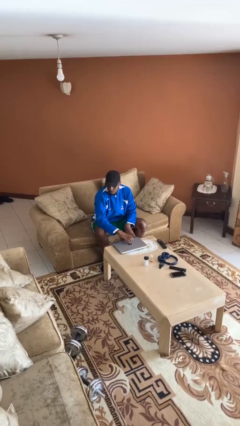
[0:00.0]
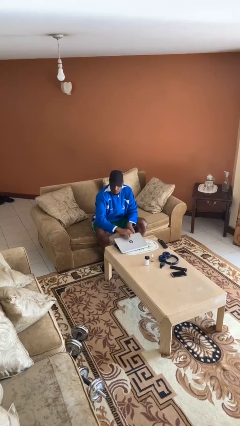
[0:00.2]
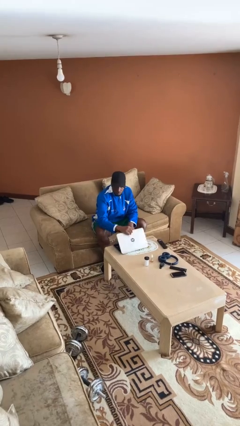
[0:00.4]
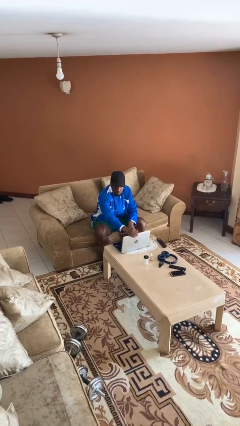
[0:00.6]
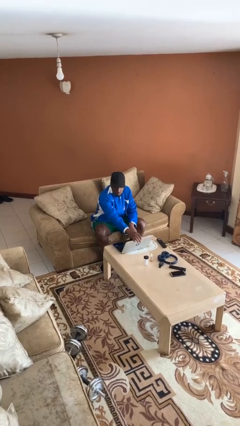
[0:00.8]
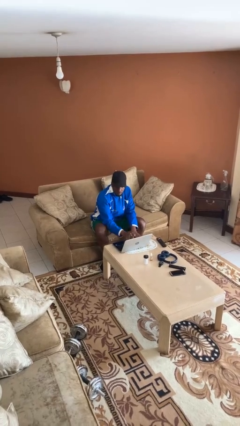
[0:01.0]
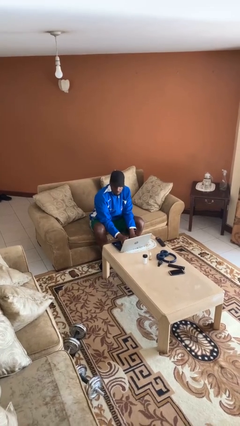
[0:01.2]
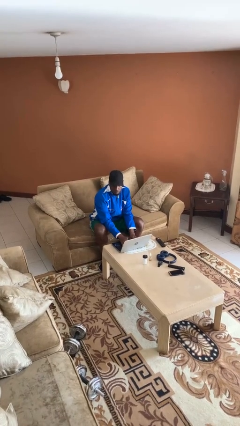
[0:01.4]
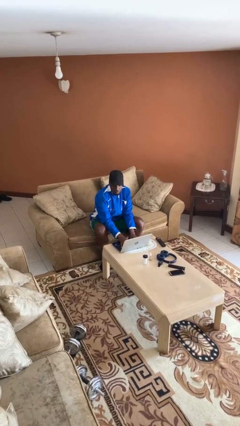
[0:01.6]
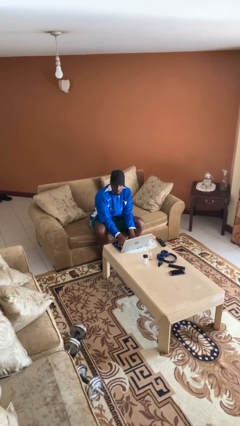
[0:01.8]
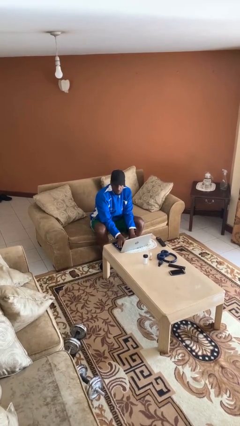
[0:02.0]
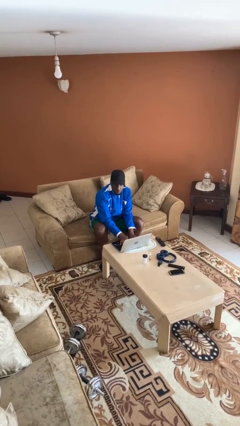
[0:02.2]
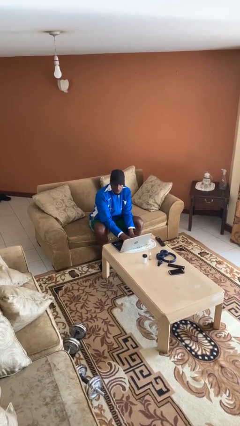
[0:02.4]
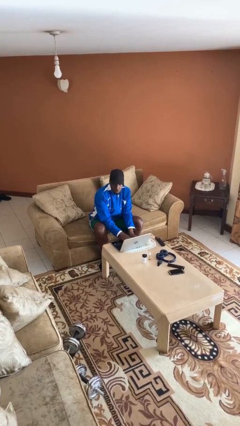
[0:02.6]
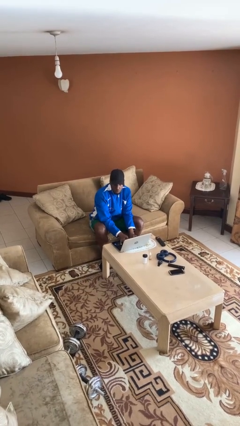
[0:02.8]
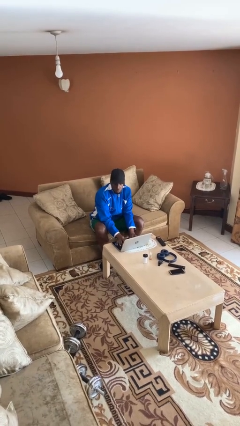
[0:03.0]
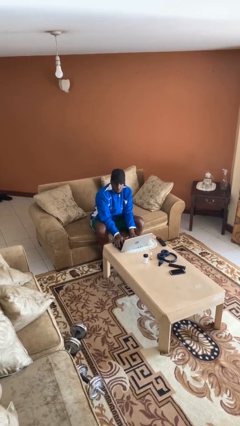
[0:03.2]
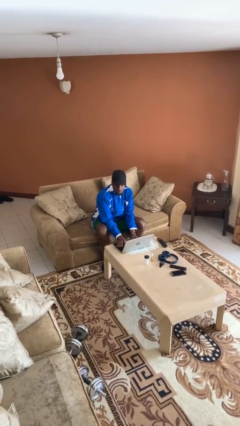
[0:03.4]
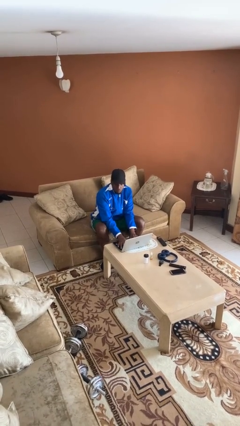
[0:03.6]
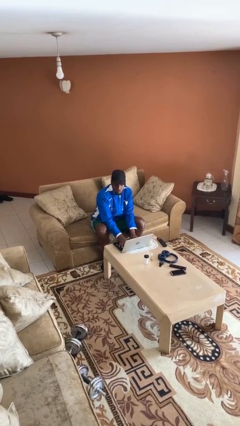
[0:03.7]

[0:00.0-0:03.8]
person interacts with laptop

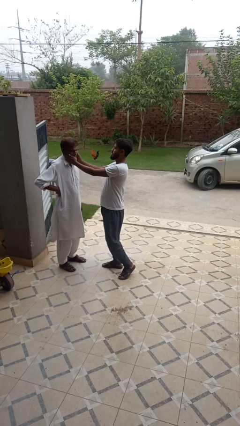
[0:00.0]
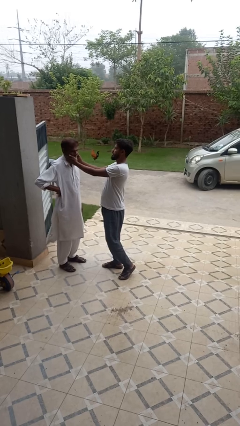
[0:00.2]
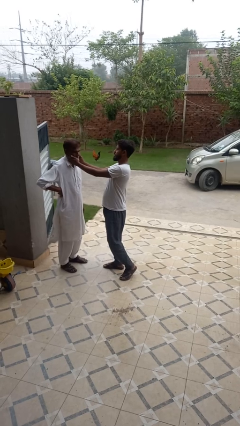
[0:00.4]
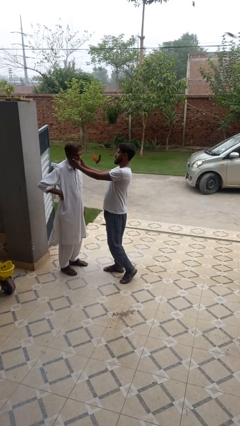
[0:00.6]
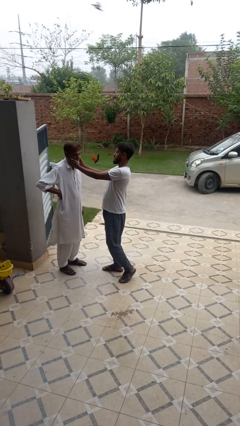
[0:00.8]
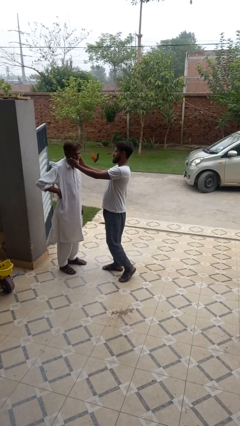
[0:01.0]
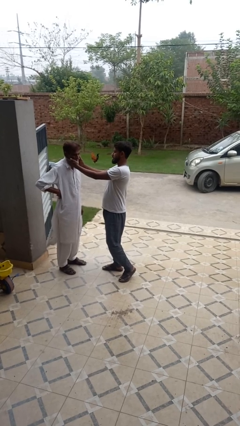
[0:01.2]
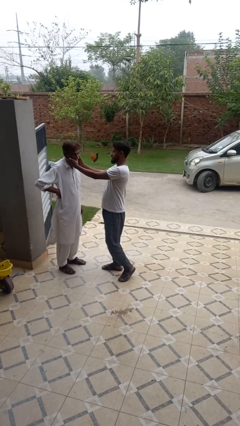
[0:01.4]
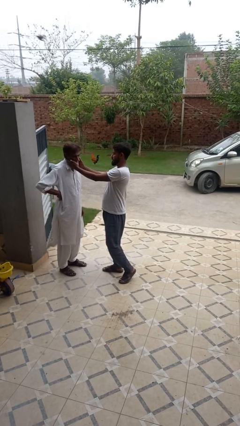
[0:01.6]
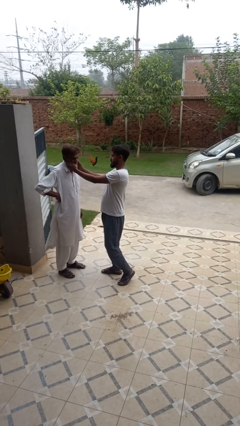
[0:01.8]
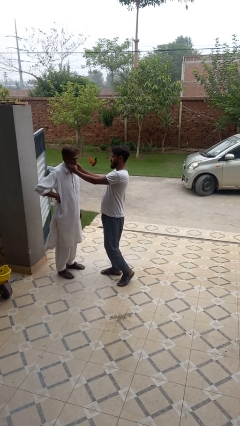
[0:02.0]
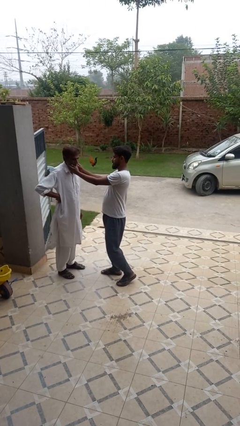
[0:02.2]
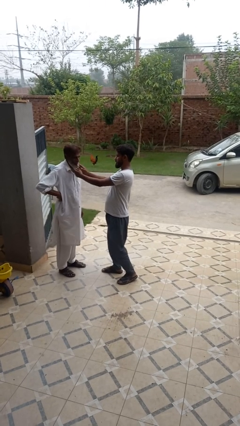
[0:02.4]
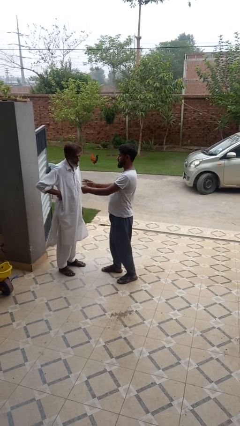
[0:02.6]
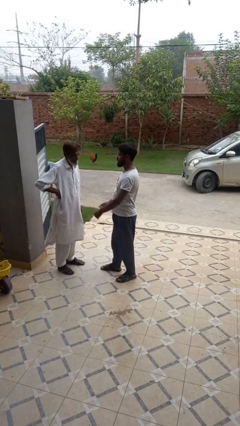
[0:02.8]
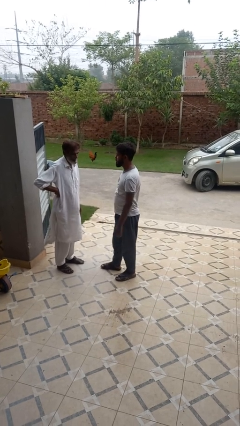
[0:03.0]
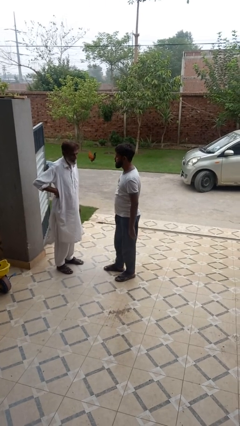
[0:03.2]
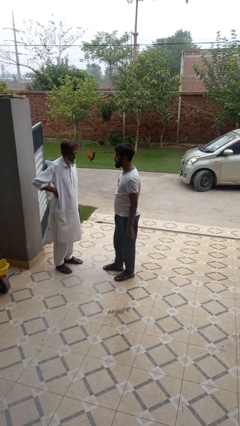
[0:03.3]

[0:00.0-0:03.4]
person touches face of person

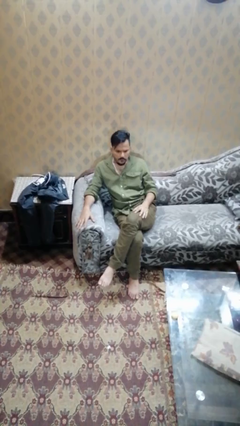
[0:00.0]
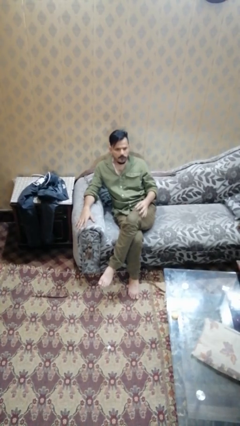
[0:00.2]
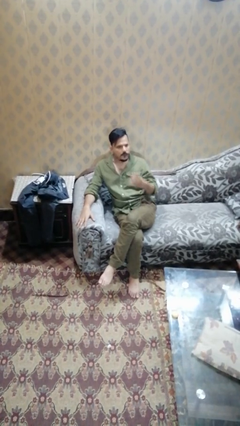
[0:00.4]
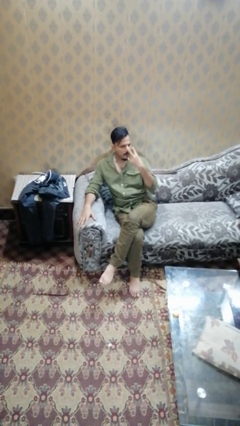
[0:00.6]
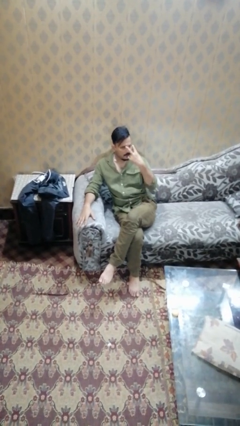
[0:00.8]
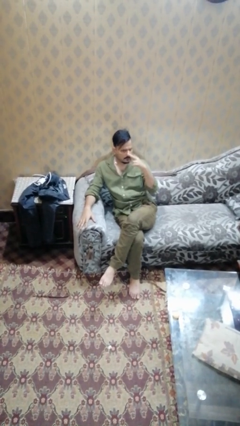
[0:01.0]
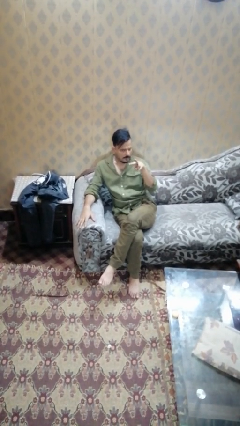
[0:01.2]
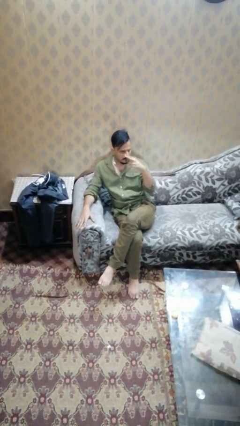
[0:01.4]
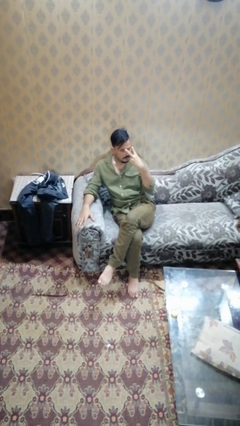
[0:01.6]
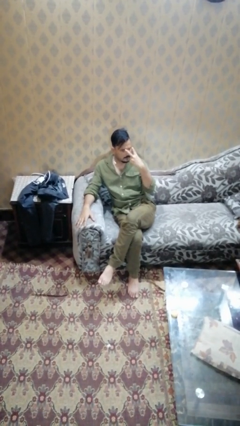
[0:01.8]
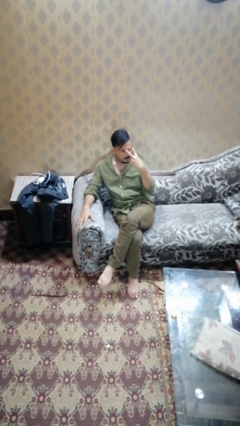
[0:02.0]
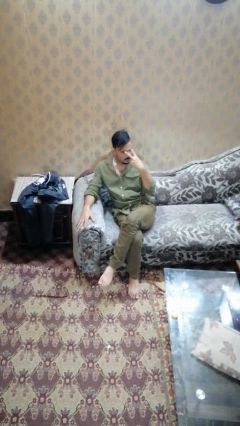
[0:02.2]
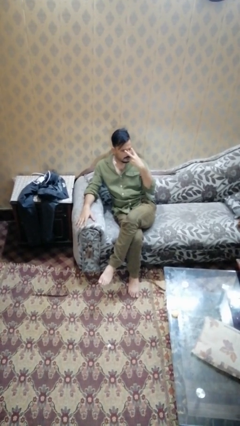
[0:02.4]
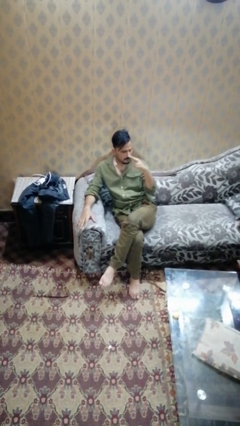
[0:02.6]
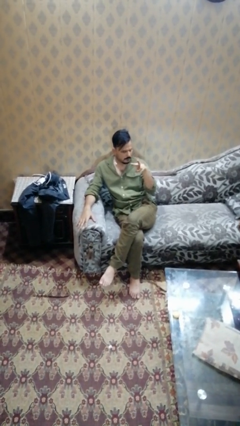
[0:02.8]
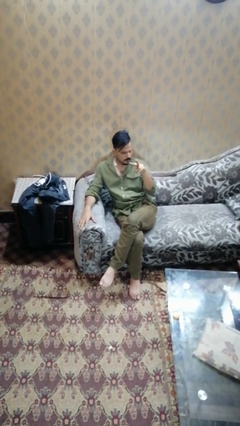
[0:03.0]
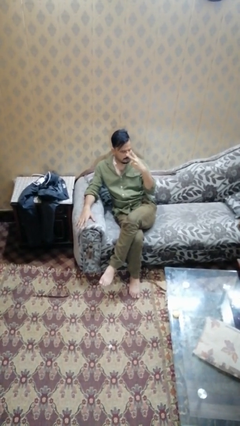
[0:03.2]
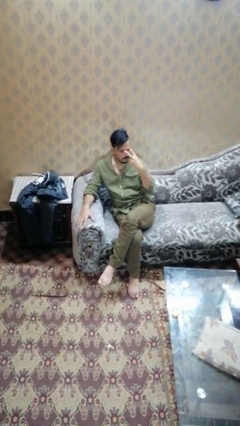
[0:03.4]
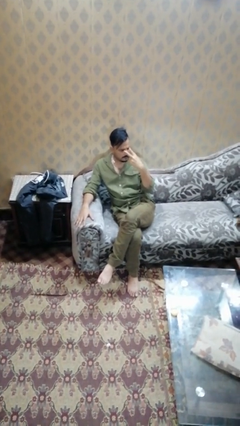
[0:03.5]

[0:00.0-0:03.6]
person gestures watch closely

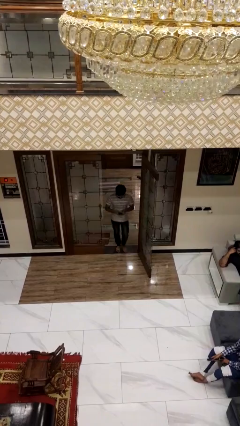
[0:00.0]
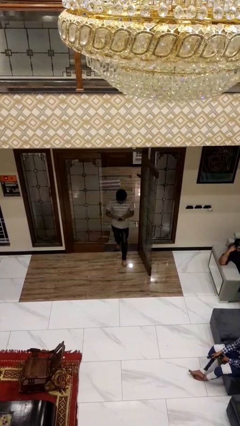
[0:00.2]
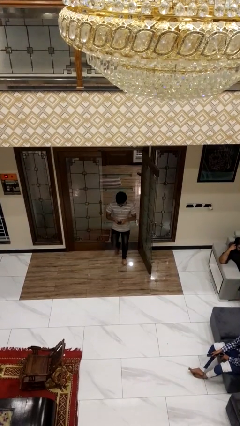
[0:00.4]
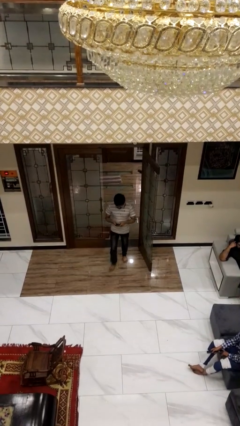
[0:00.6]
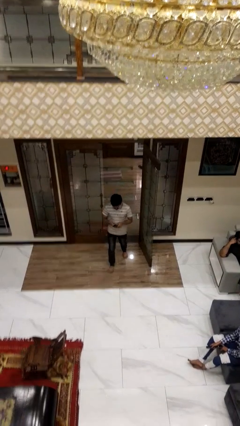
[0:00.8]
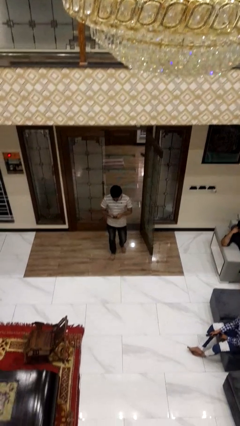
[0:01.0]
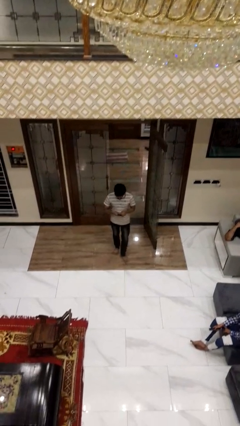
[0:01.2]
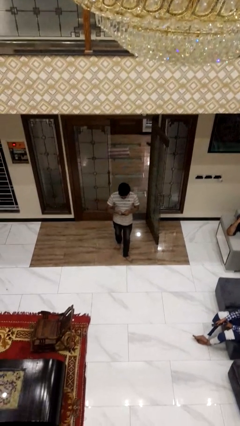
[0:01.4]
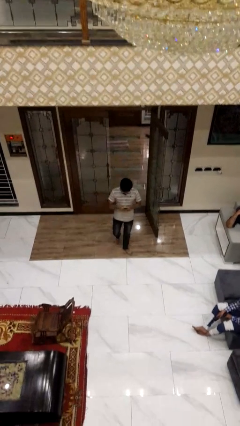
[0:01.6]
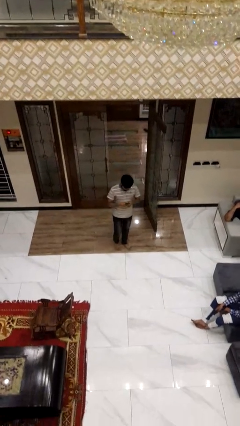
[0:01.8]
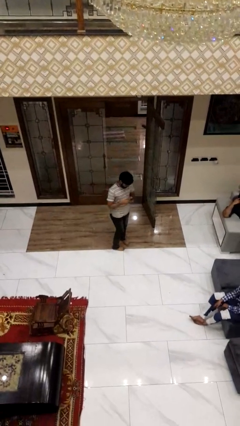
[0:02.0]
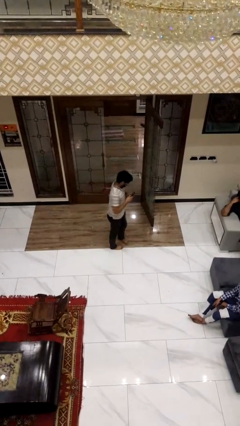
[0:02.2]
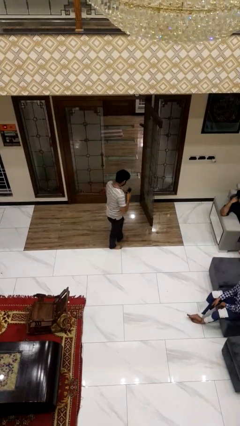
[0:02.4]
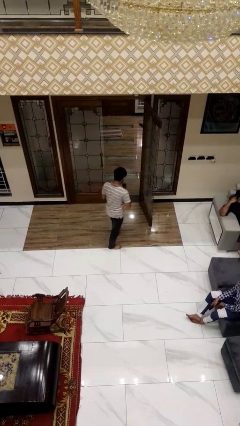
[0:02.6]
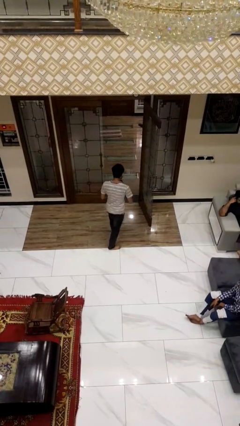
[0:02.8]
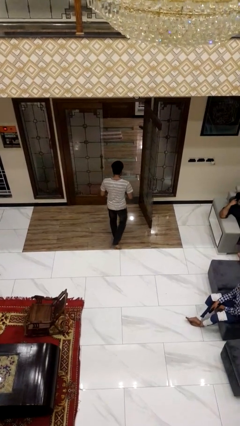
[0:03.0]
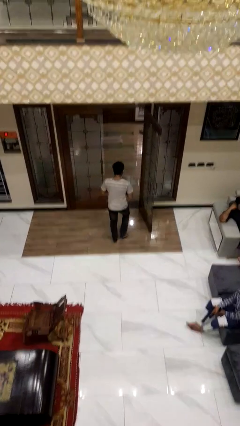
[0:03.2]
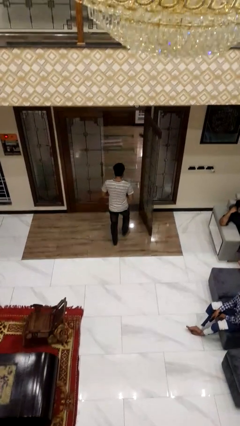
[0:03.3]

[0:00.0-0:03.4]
person enters scene through structure

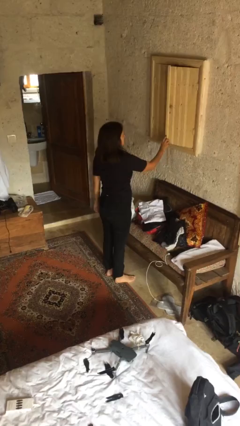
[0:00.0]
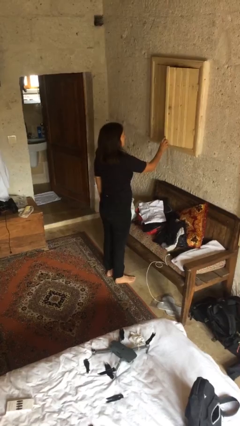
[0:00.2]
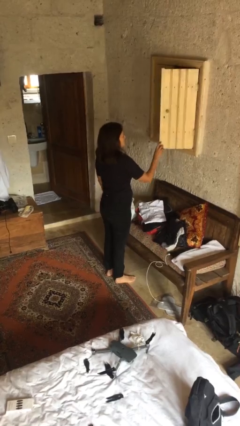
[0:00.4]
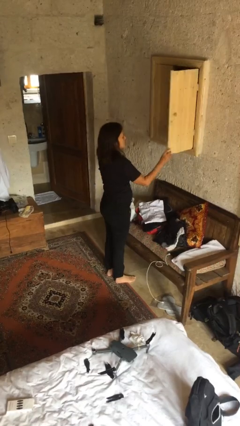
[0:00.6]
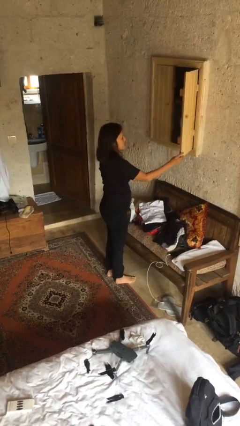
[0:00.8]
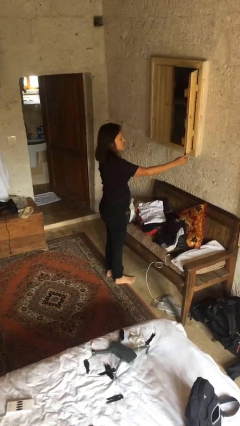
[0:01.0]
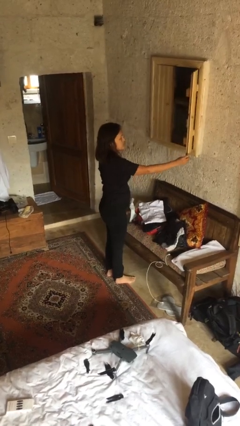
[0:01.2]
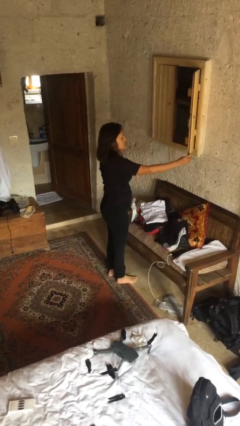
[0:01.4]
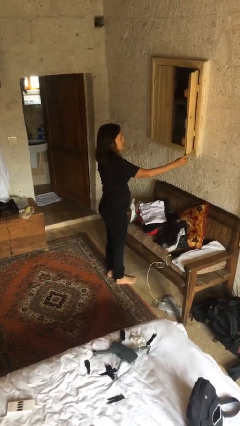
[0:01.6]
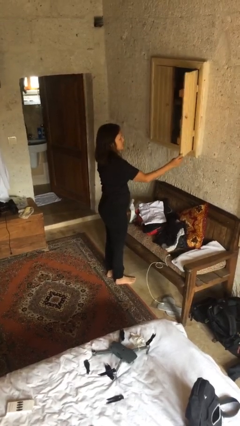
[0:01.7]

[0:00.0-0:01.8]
person opens dresser drawer

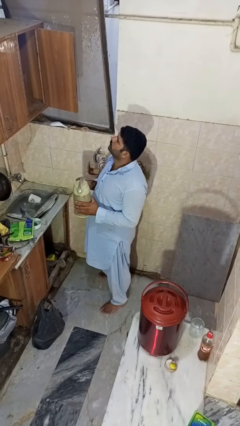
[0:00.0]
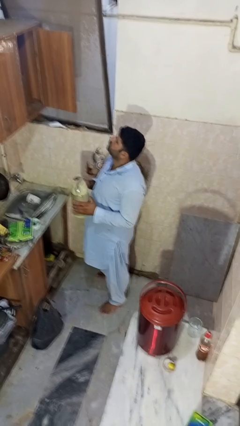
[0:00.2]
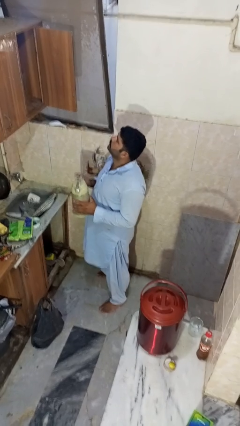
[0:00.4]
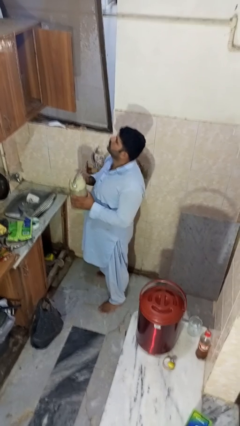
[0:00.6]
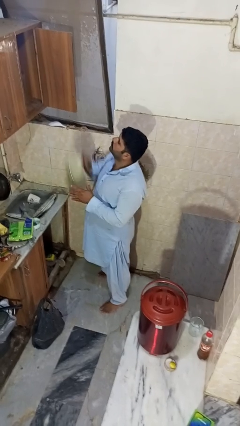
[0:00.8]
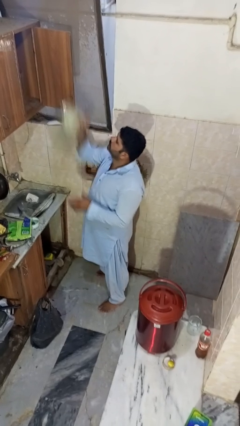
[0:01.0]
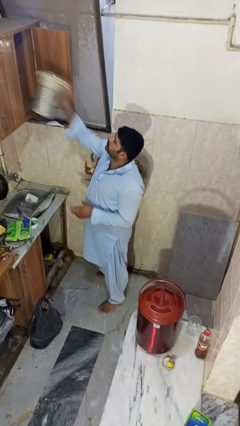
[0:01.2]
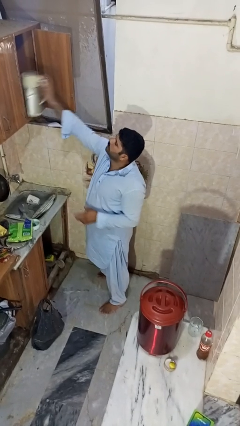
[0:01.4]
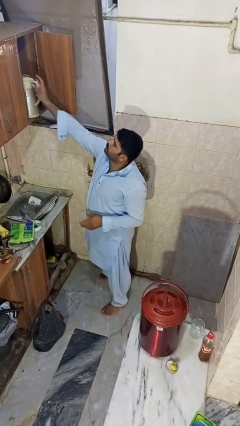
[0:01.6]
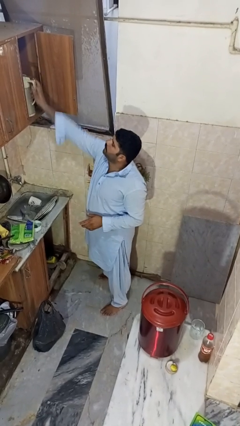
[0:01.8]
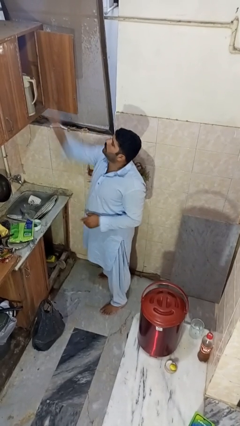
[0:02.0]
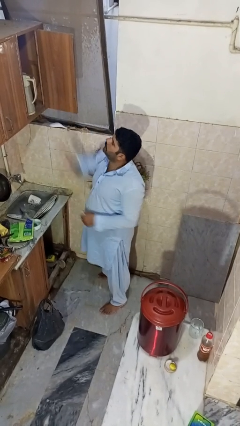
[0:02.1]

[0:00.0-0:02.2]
person puts object in cabinet
